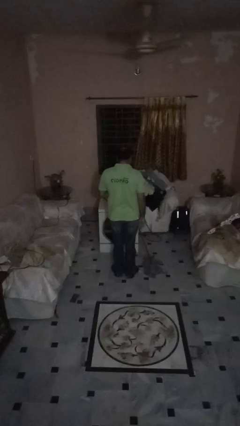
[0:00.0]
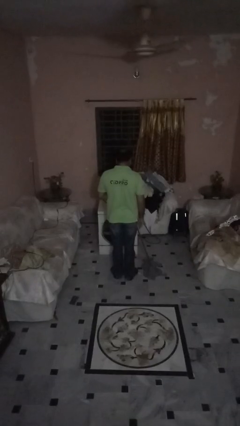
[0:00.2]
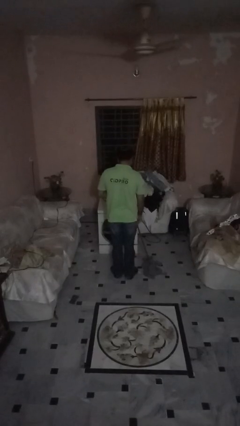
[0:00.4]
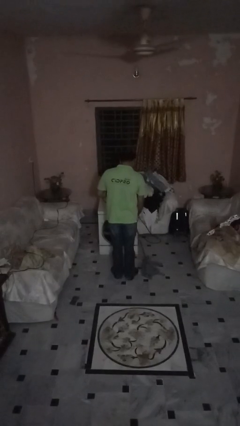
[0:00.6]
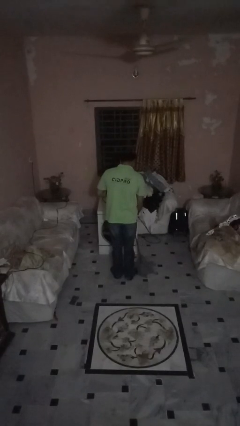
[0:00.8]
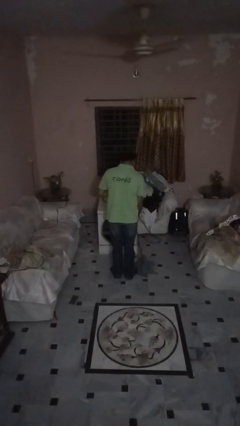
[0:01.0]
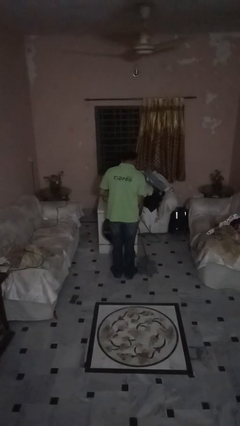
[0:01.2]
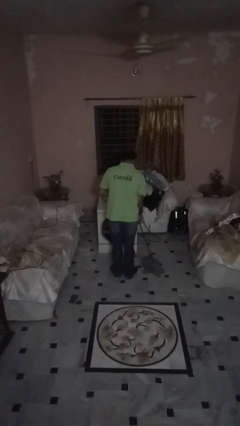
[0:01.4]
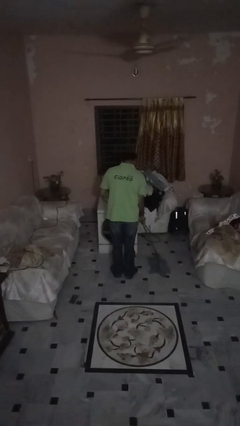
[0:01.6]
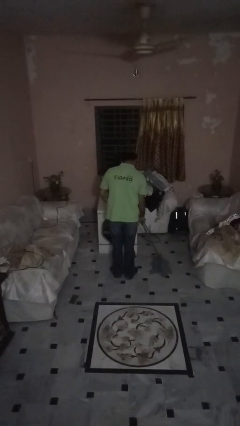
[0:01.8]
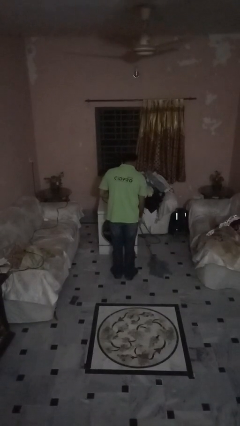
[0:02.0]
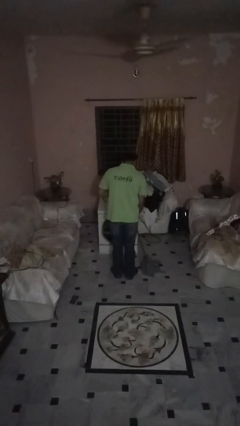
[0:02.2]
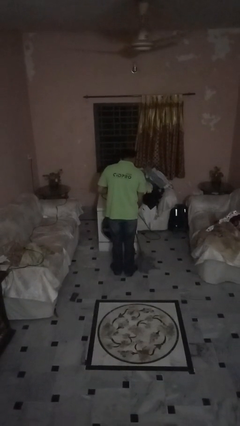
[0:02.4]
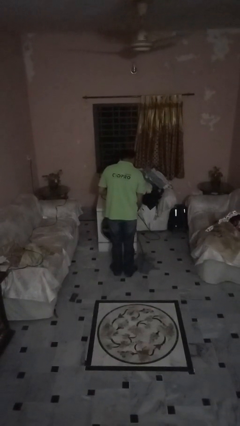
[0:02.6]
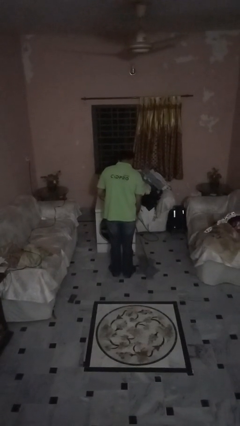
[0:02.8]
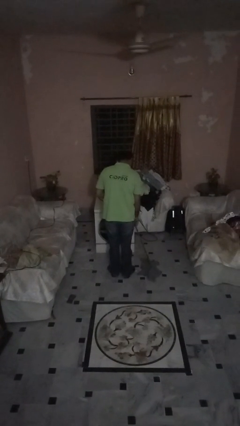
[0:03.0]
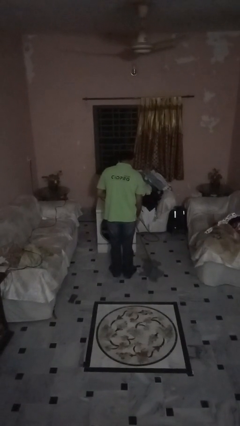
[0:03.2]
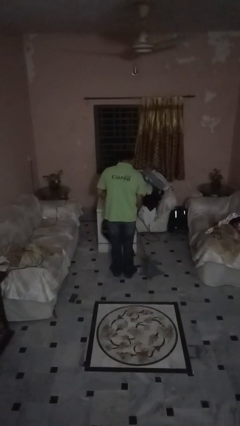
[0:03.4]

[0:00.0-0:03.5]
person mops

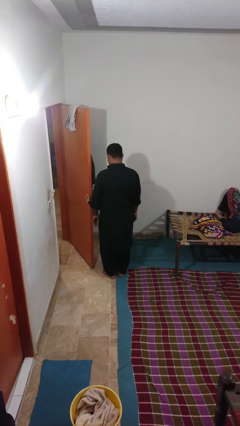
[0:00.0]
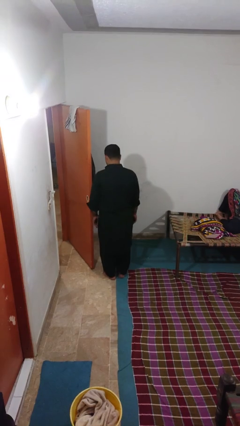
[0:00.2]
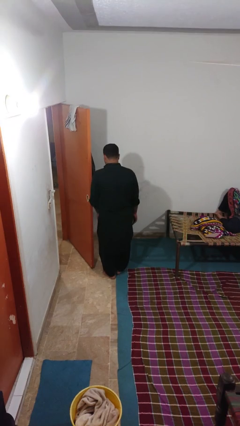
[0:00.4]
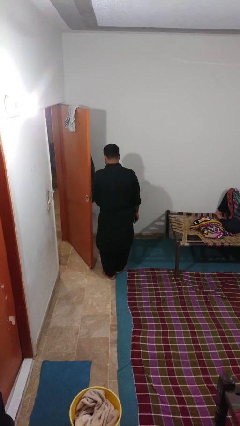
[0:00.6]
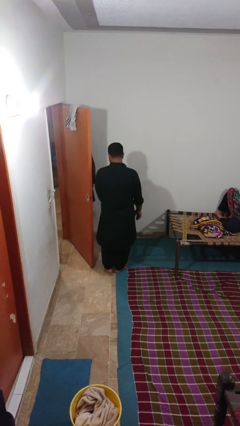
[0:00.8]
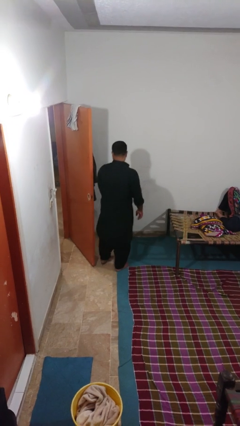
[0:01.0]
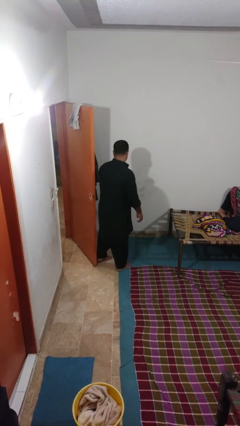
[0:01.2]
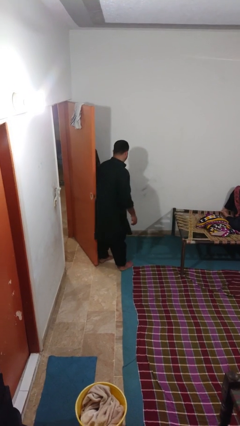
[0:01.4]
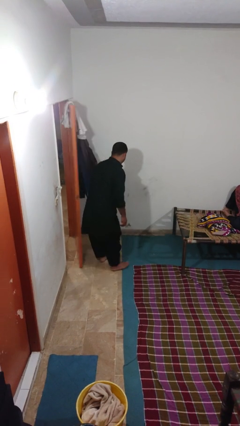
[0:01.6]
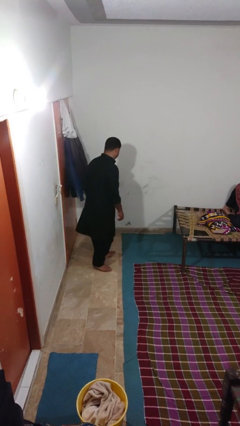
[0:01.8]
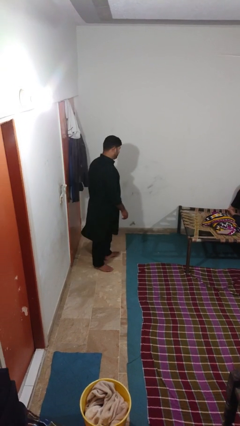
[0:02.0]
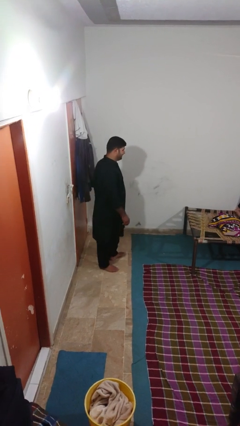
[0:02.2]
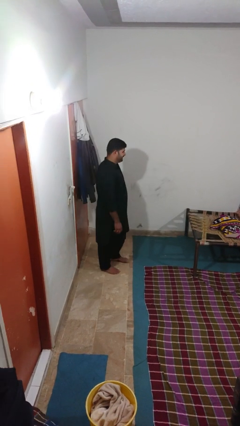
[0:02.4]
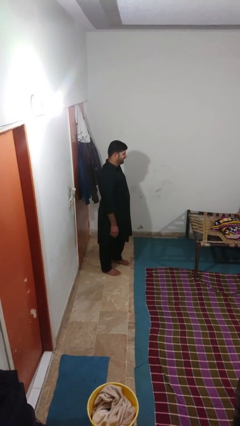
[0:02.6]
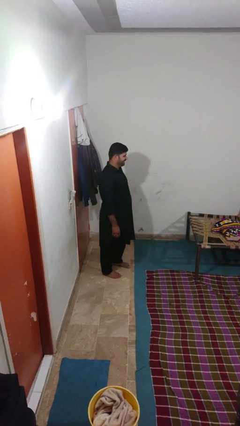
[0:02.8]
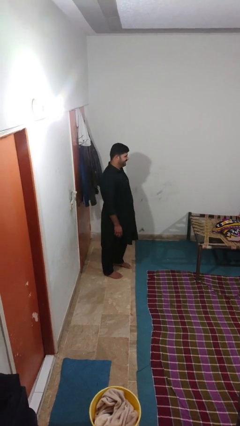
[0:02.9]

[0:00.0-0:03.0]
person closes door with hip

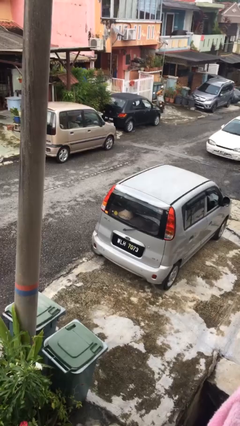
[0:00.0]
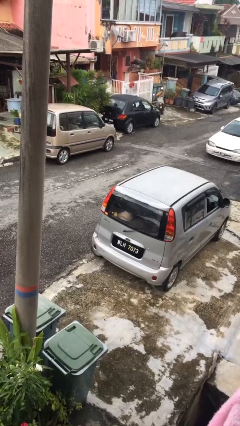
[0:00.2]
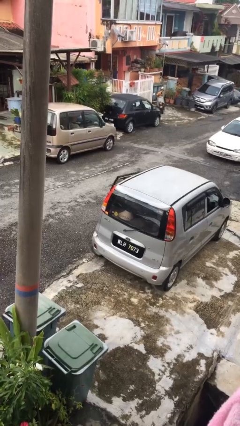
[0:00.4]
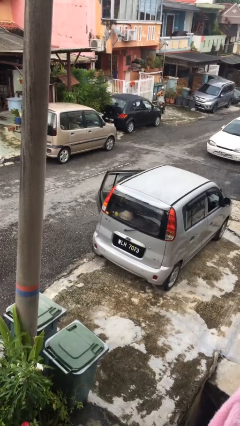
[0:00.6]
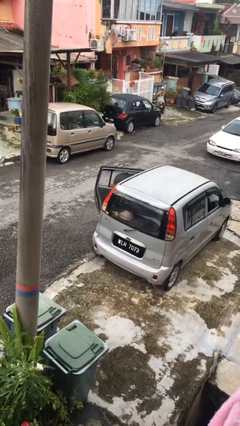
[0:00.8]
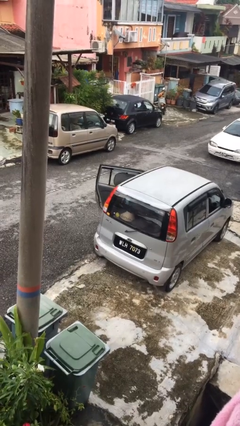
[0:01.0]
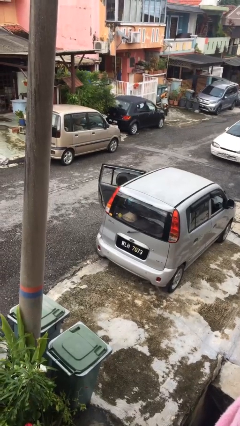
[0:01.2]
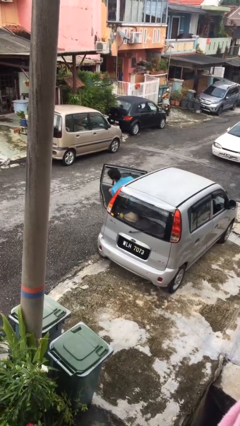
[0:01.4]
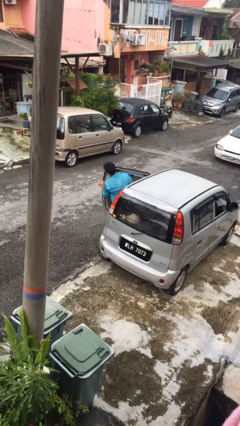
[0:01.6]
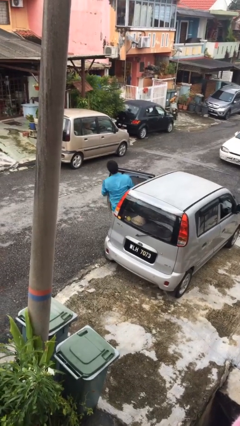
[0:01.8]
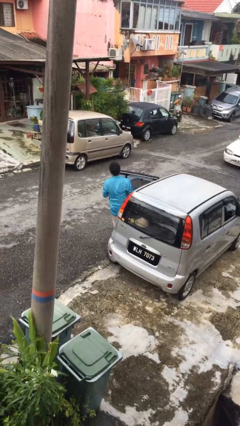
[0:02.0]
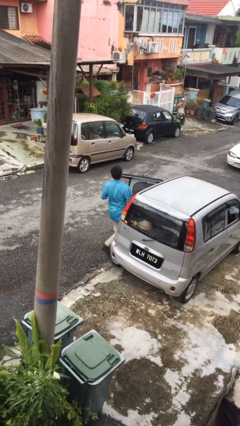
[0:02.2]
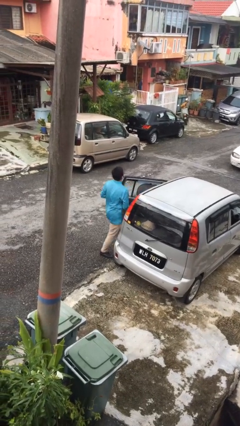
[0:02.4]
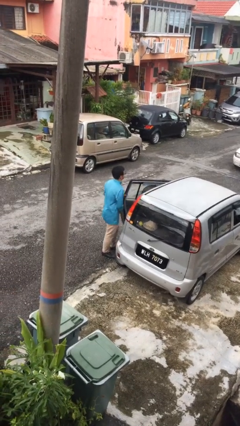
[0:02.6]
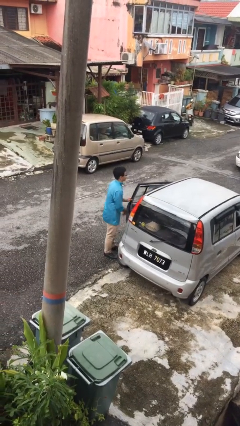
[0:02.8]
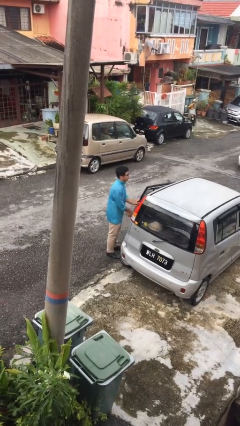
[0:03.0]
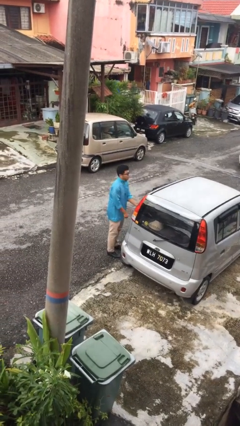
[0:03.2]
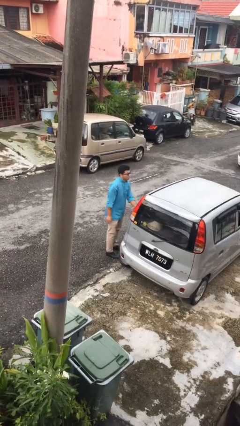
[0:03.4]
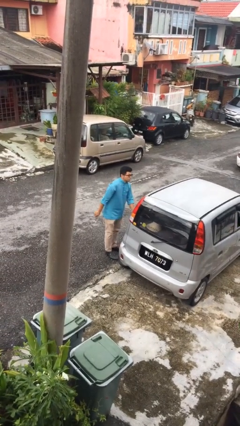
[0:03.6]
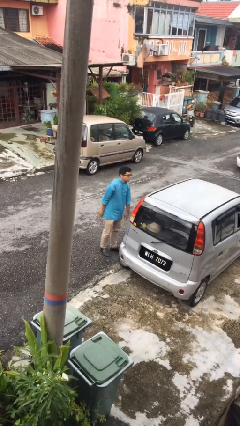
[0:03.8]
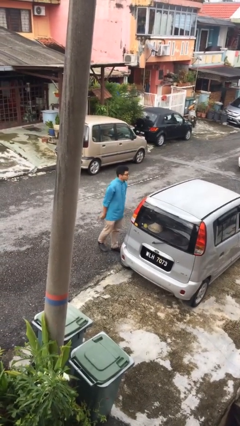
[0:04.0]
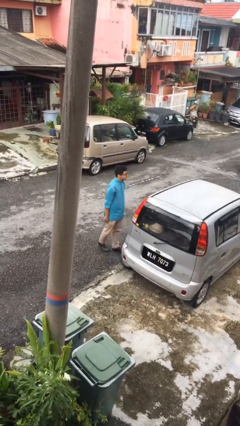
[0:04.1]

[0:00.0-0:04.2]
person exits car

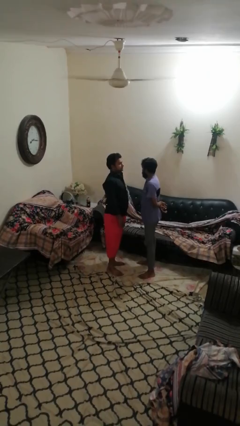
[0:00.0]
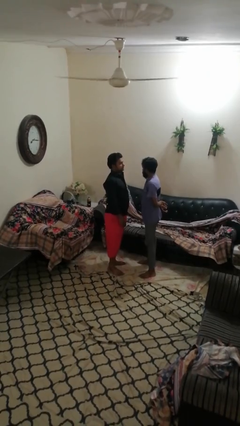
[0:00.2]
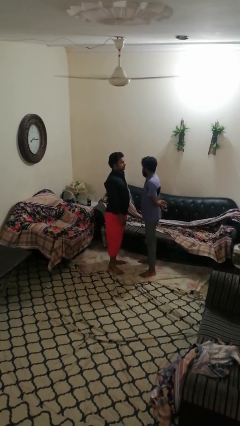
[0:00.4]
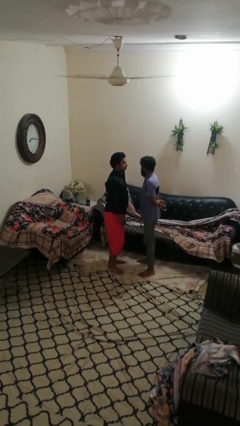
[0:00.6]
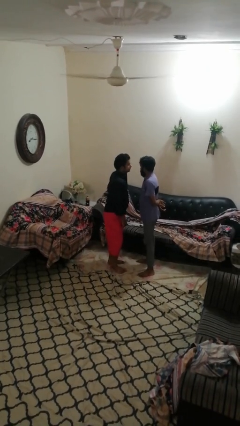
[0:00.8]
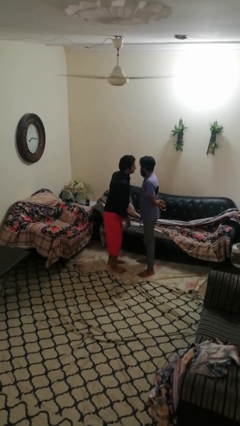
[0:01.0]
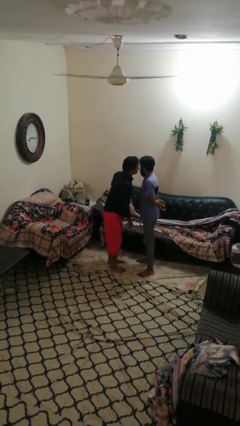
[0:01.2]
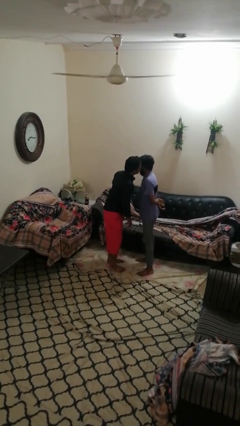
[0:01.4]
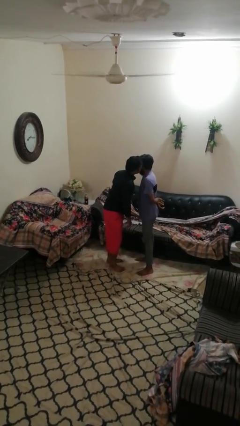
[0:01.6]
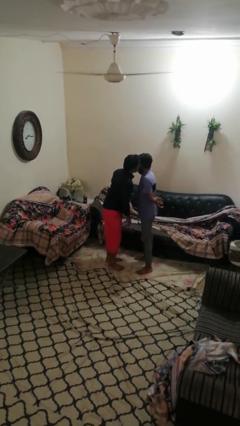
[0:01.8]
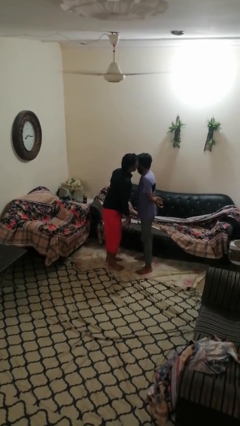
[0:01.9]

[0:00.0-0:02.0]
person kisses cheek of person

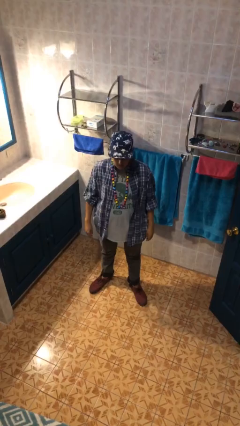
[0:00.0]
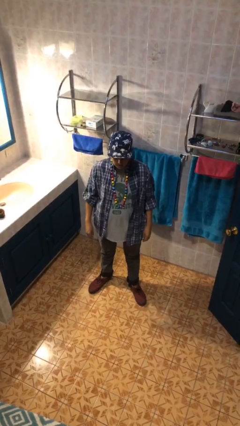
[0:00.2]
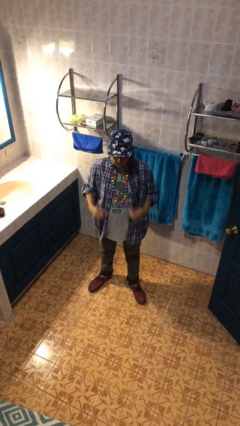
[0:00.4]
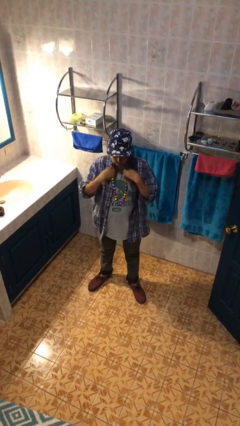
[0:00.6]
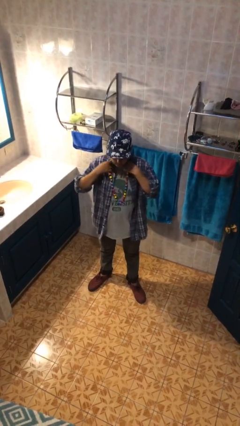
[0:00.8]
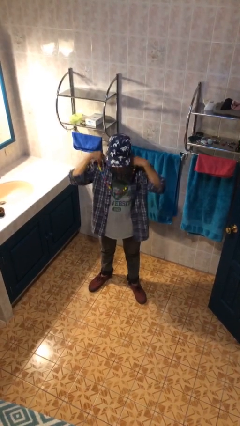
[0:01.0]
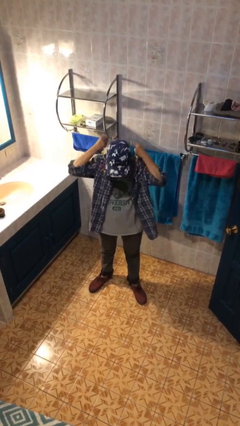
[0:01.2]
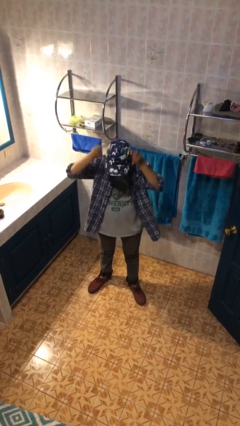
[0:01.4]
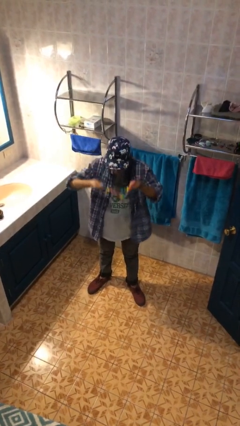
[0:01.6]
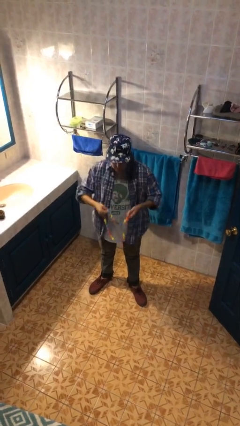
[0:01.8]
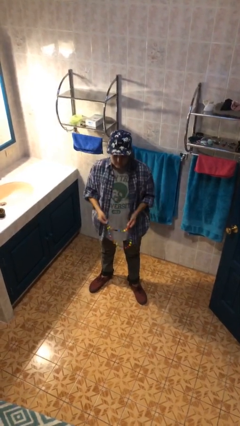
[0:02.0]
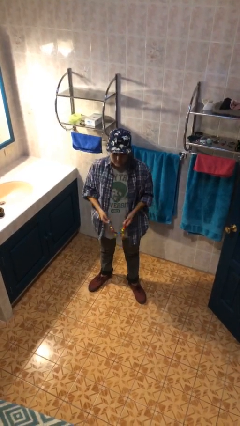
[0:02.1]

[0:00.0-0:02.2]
person takes off necklace

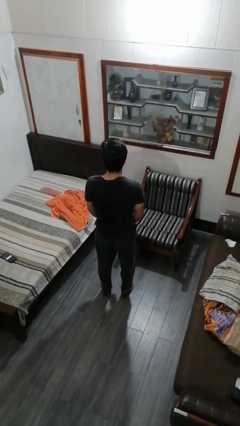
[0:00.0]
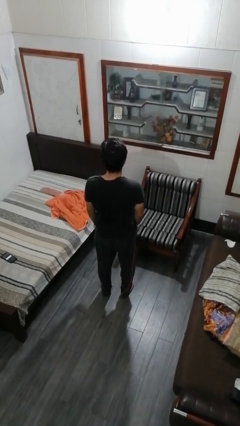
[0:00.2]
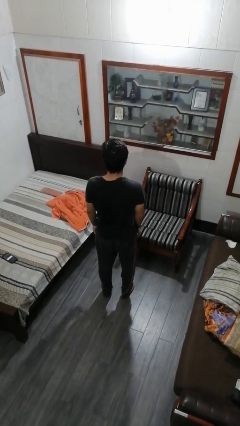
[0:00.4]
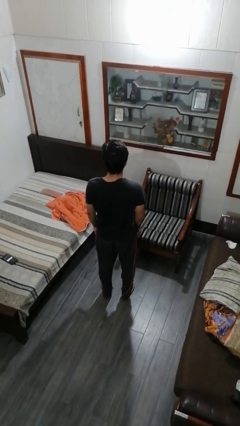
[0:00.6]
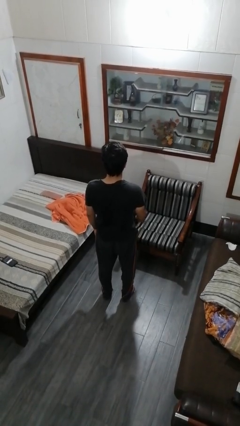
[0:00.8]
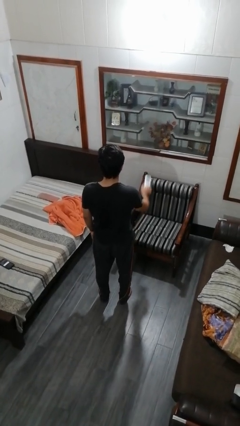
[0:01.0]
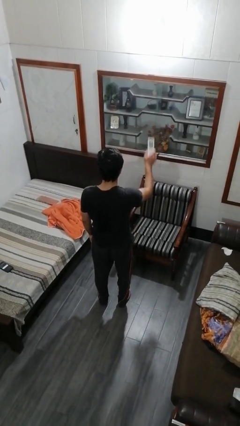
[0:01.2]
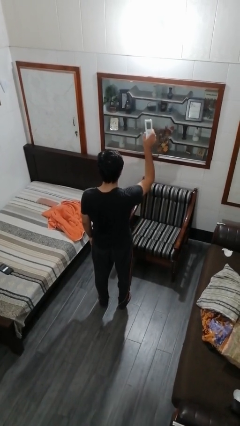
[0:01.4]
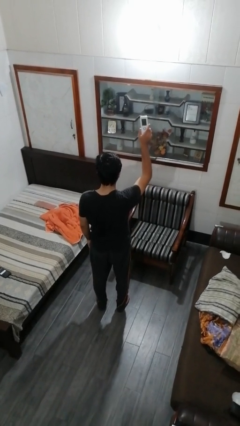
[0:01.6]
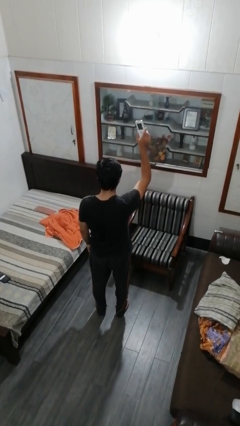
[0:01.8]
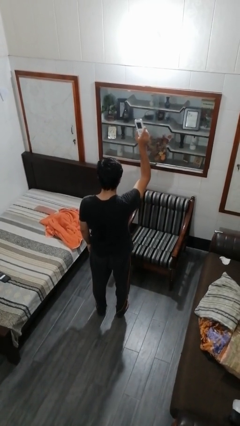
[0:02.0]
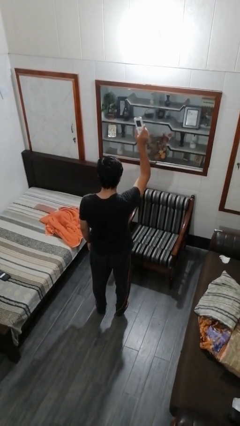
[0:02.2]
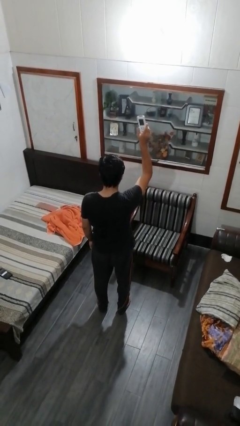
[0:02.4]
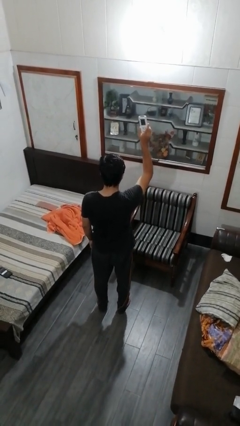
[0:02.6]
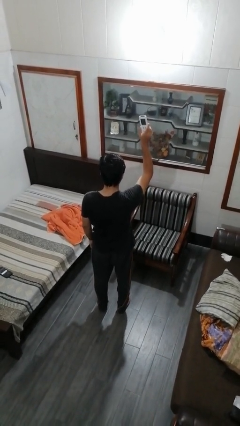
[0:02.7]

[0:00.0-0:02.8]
person holds object above head
